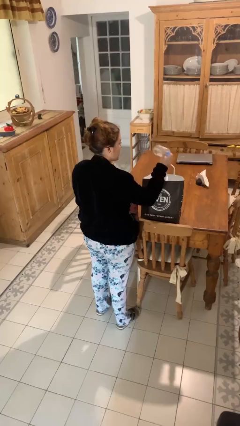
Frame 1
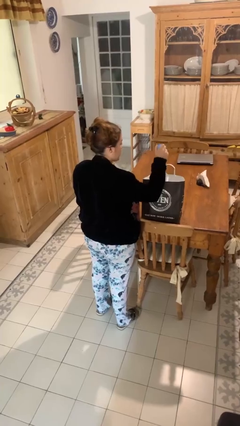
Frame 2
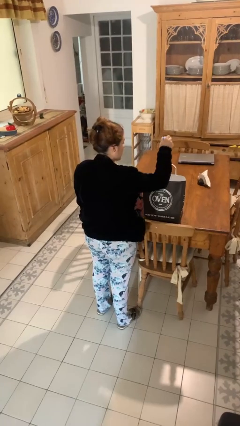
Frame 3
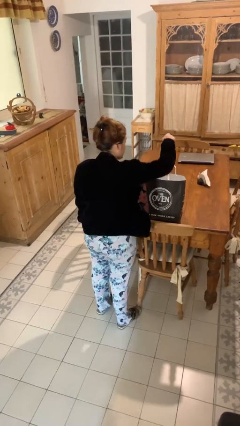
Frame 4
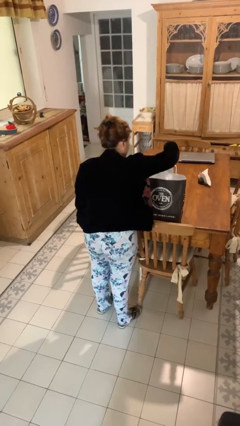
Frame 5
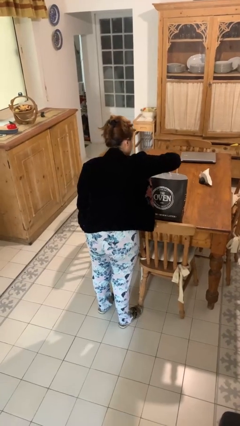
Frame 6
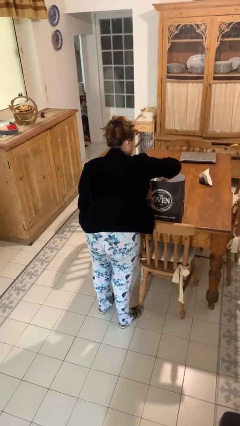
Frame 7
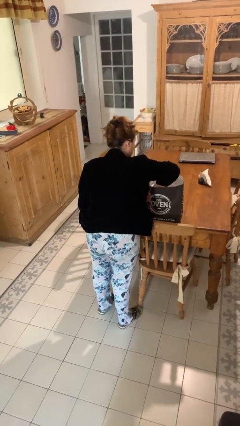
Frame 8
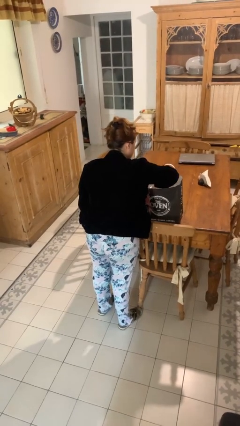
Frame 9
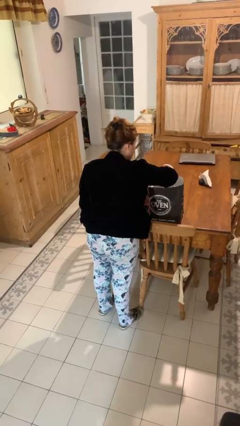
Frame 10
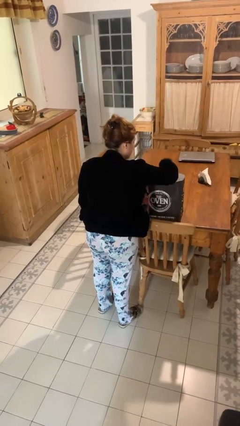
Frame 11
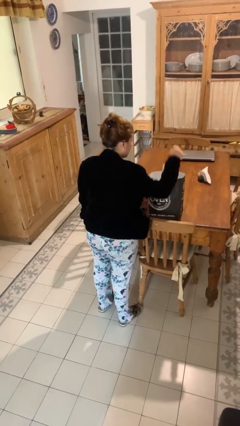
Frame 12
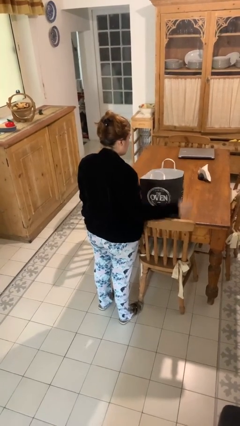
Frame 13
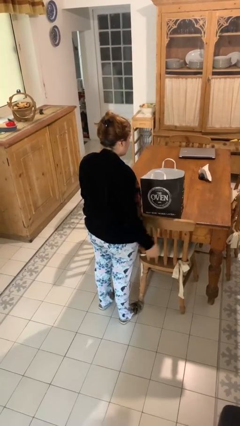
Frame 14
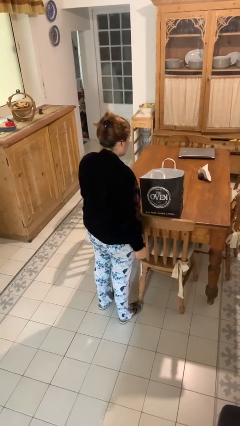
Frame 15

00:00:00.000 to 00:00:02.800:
person puts object into bag

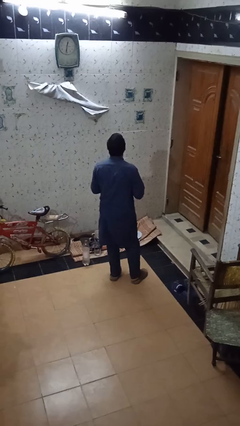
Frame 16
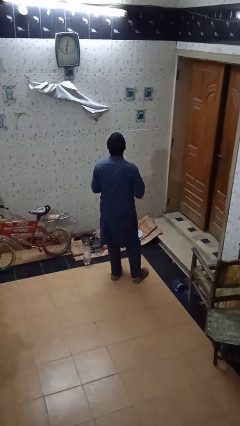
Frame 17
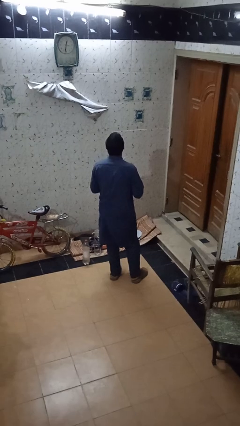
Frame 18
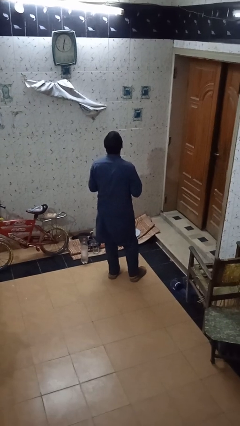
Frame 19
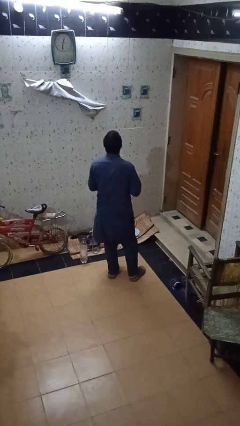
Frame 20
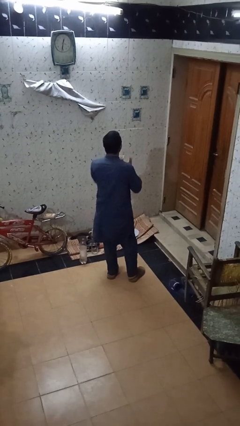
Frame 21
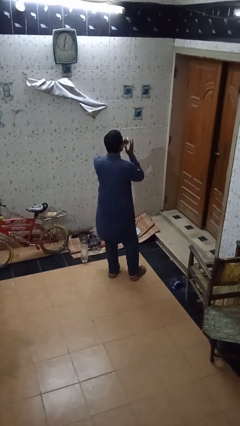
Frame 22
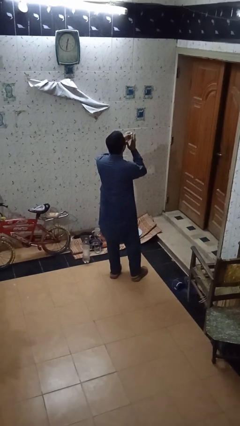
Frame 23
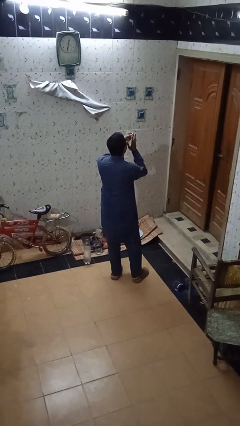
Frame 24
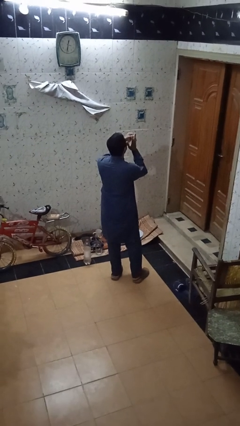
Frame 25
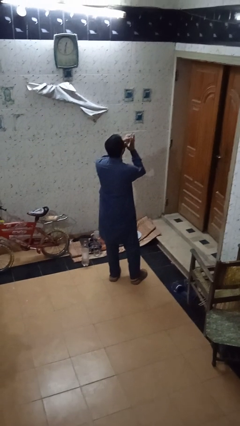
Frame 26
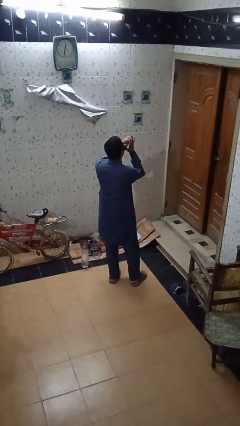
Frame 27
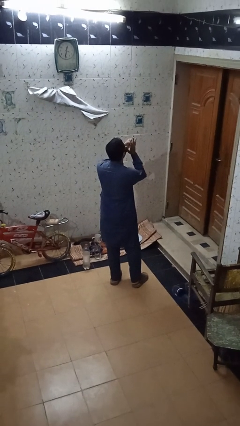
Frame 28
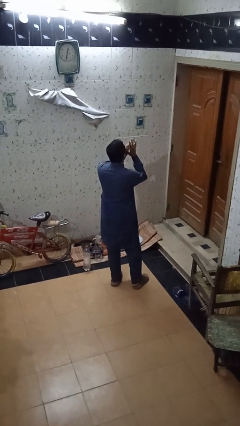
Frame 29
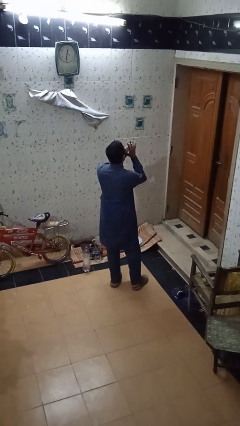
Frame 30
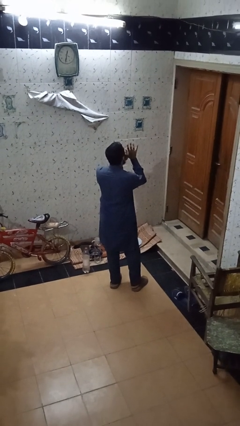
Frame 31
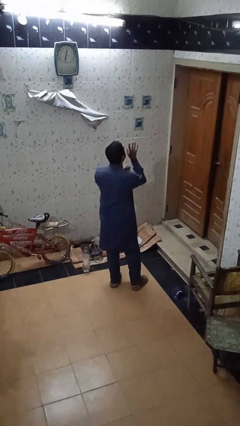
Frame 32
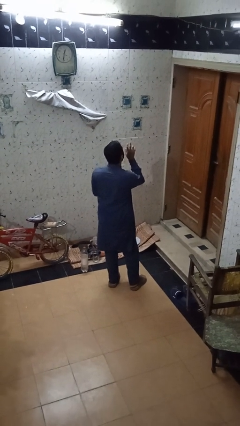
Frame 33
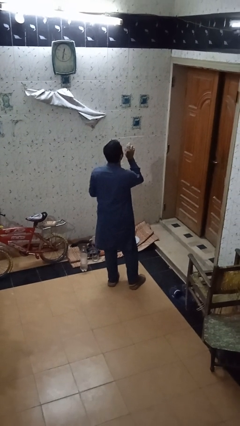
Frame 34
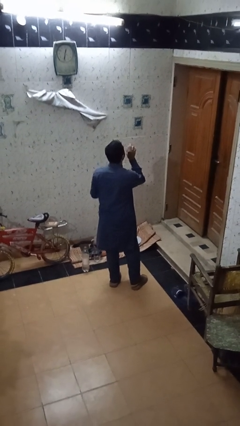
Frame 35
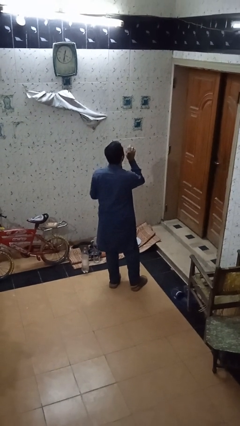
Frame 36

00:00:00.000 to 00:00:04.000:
person puts on ring

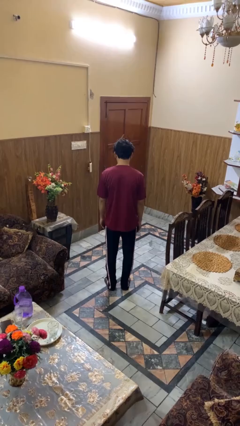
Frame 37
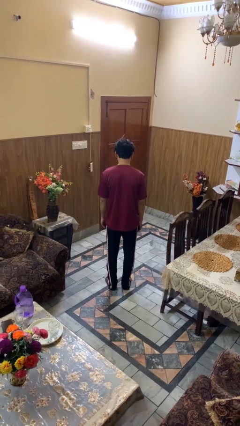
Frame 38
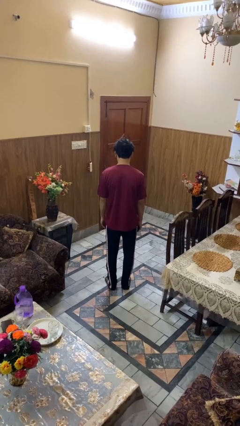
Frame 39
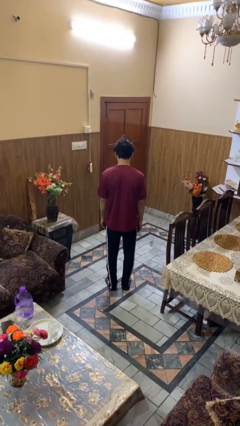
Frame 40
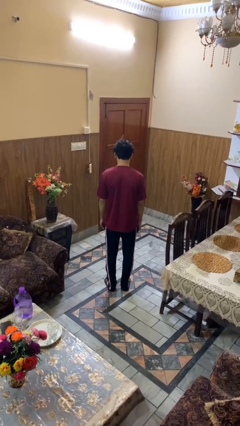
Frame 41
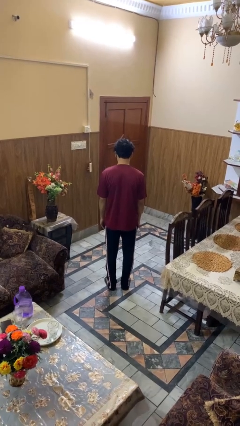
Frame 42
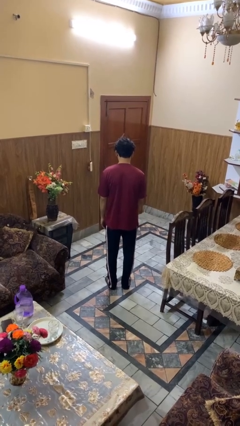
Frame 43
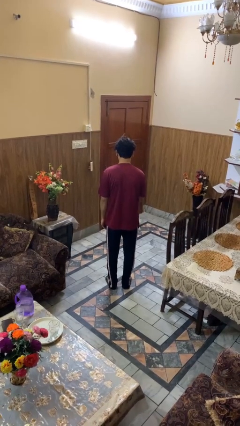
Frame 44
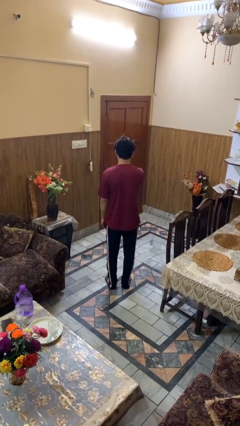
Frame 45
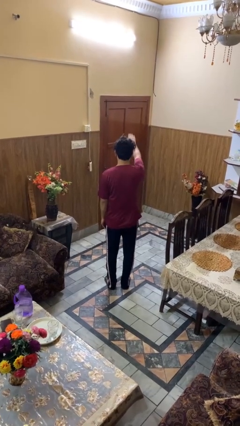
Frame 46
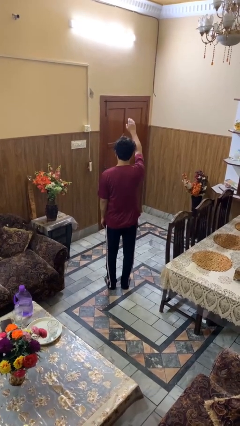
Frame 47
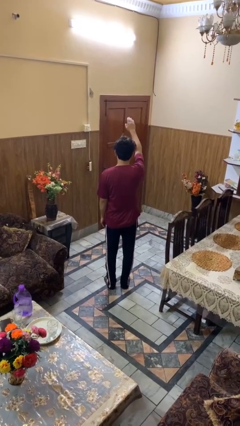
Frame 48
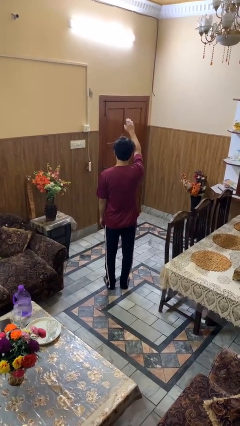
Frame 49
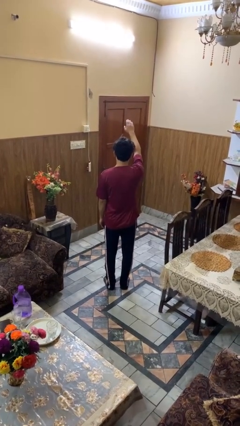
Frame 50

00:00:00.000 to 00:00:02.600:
person gestures swipe up

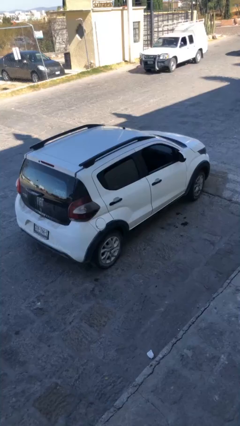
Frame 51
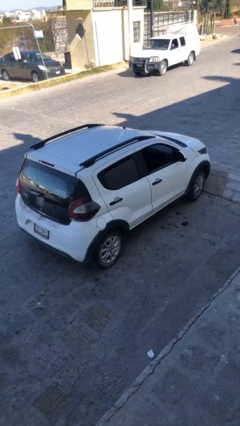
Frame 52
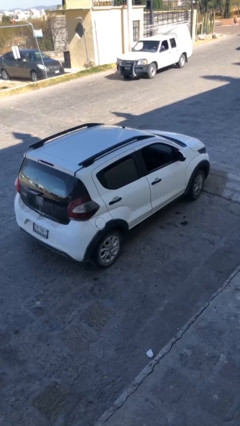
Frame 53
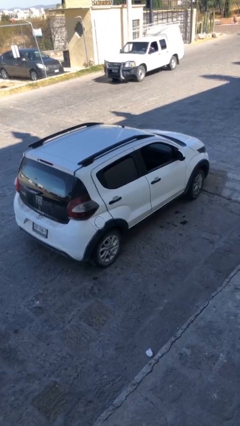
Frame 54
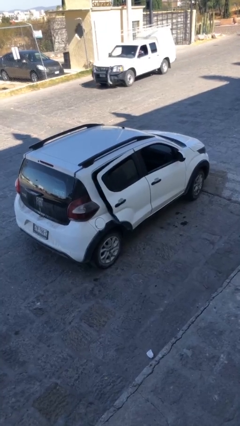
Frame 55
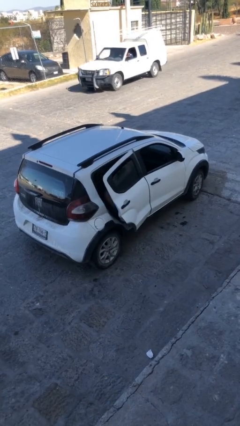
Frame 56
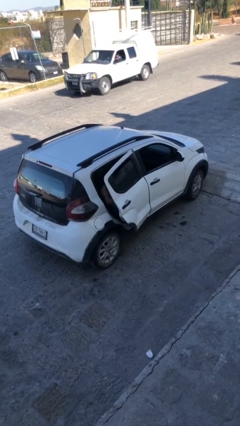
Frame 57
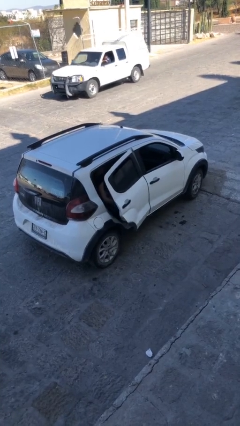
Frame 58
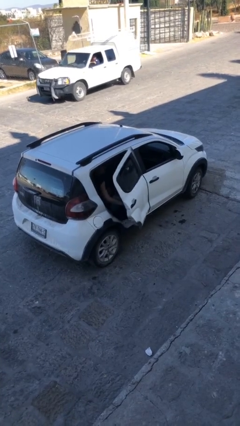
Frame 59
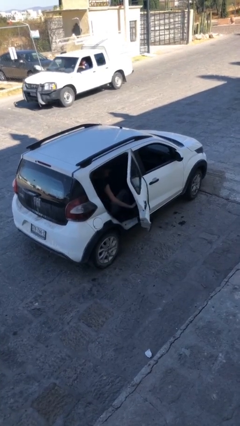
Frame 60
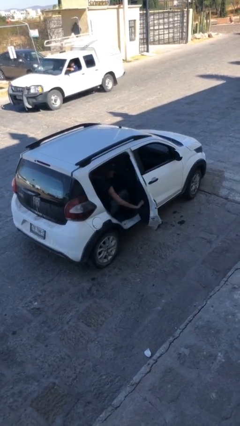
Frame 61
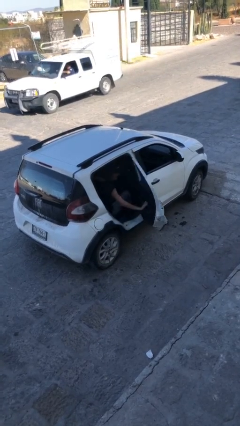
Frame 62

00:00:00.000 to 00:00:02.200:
person opens car door

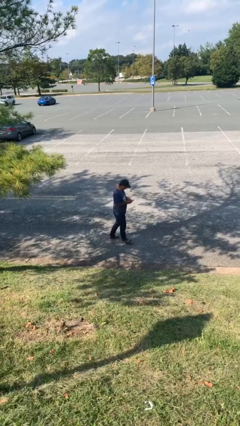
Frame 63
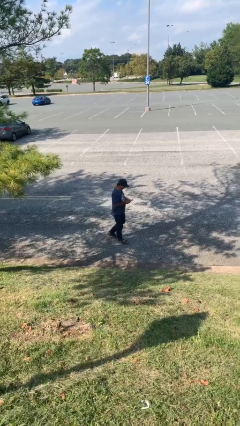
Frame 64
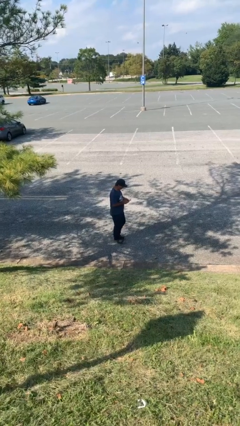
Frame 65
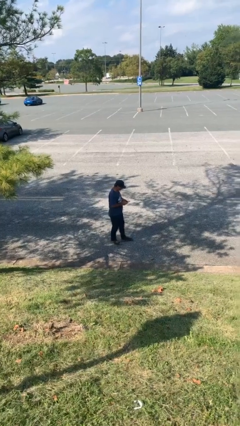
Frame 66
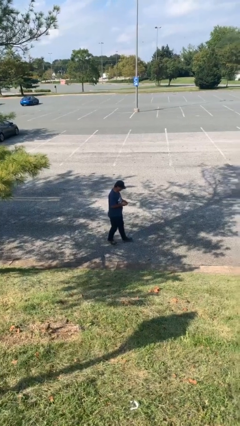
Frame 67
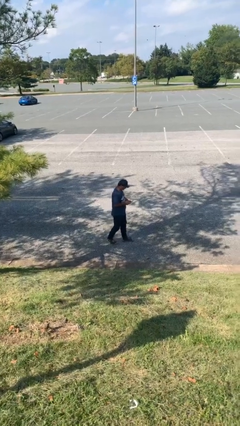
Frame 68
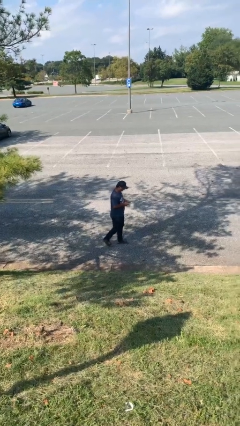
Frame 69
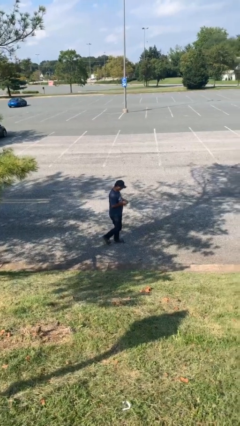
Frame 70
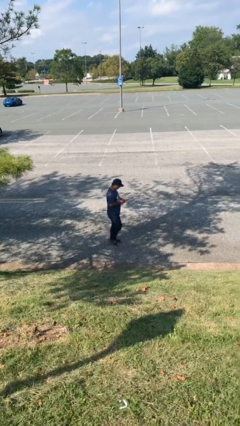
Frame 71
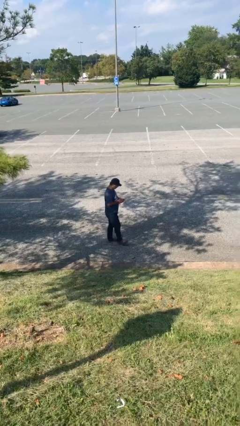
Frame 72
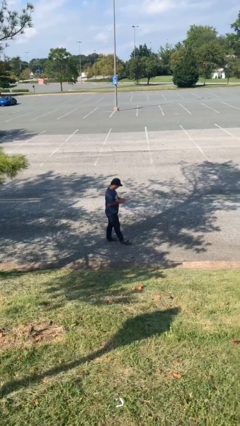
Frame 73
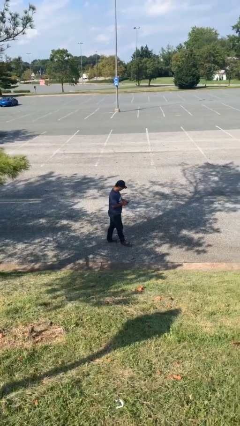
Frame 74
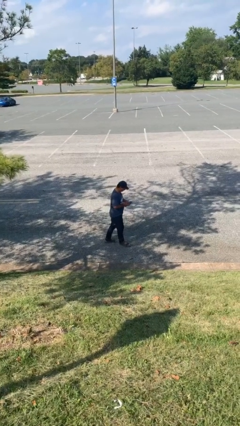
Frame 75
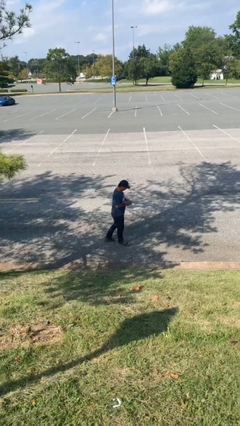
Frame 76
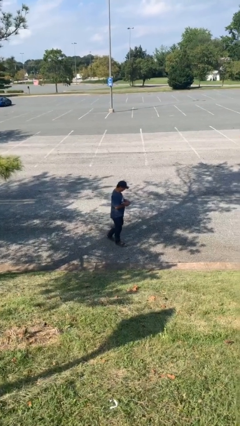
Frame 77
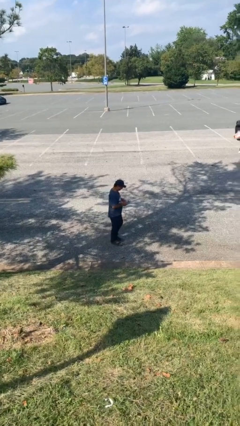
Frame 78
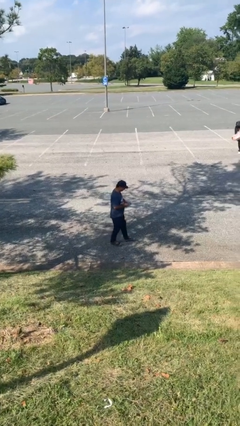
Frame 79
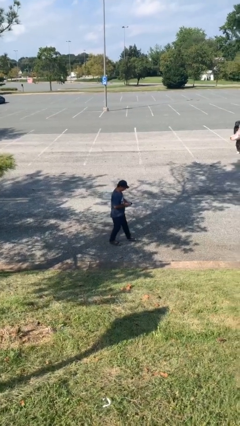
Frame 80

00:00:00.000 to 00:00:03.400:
person texts on phone

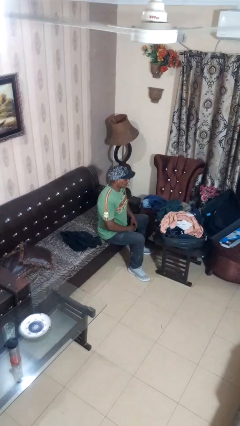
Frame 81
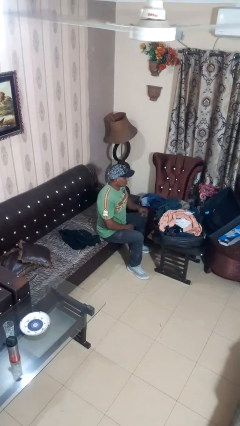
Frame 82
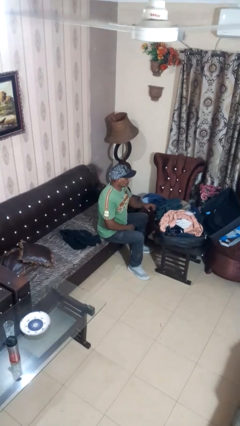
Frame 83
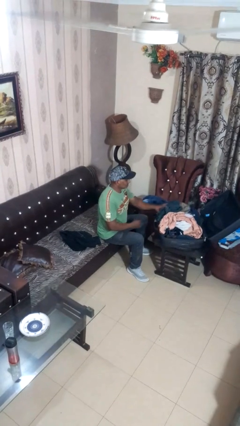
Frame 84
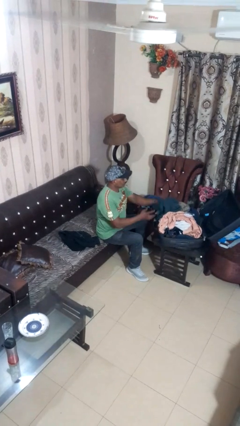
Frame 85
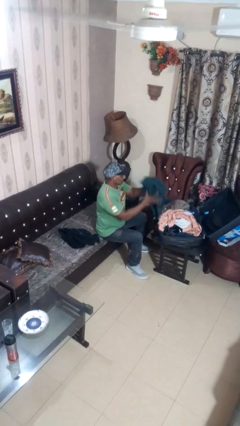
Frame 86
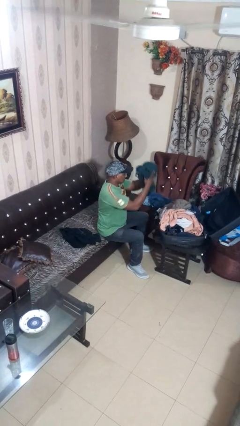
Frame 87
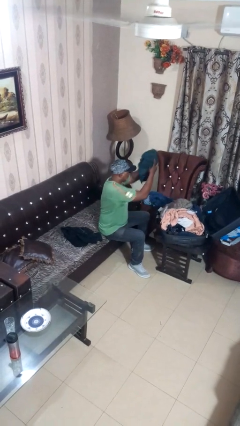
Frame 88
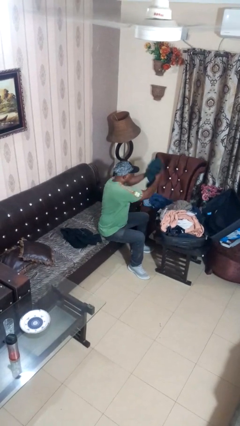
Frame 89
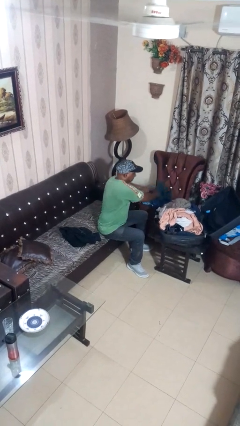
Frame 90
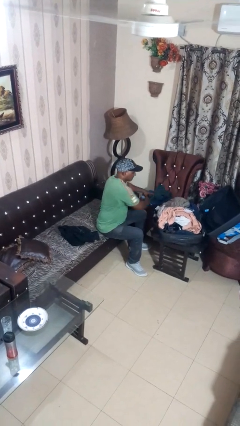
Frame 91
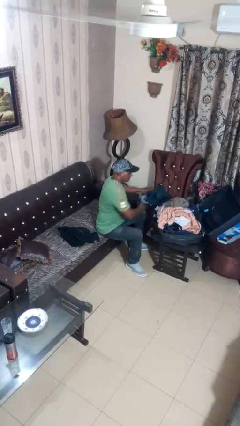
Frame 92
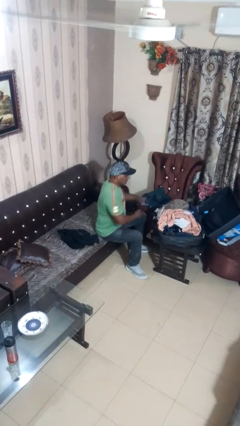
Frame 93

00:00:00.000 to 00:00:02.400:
person unloads clothes from suitcase
